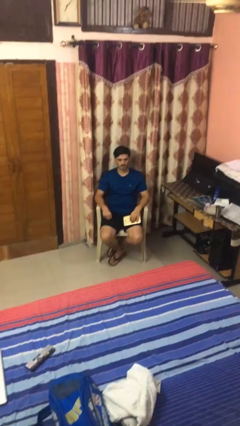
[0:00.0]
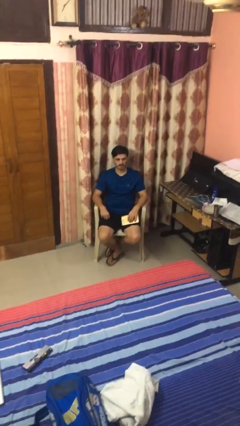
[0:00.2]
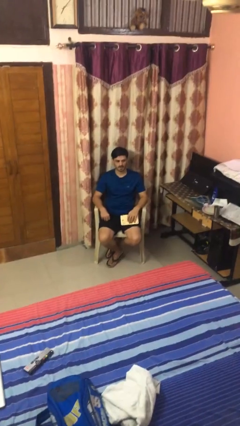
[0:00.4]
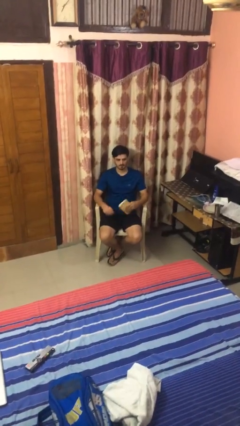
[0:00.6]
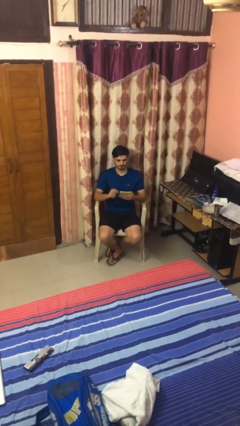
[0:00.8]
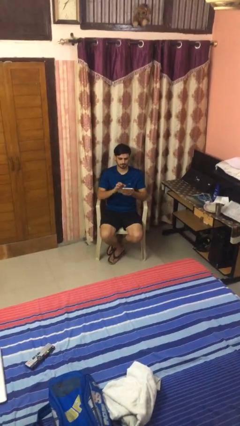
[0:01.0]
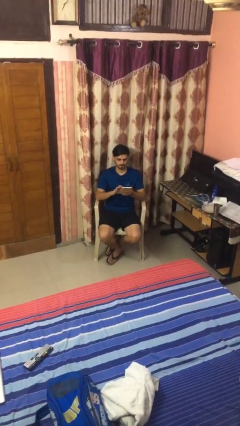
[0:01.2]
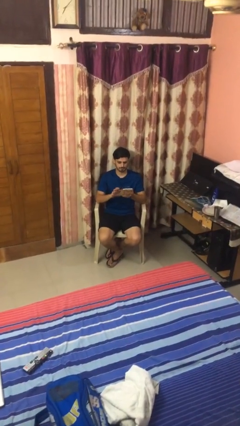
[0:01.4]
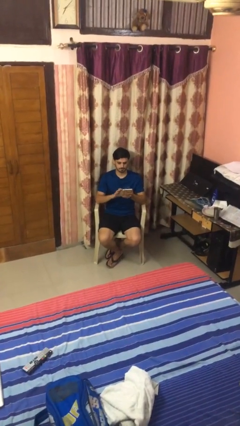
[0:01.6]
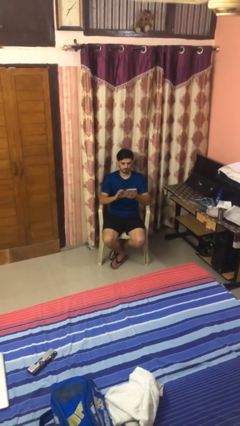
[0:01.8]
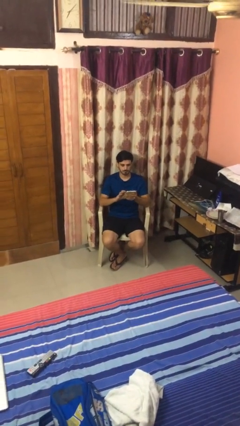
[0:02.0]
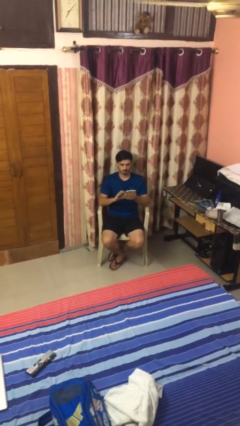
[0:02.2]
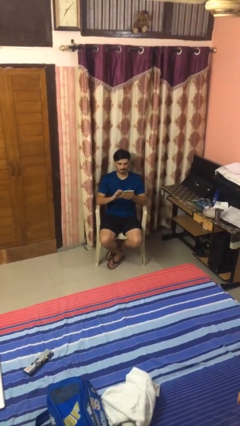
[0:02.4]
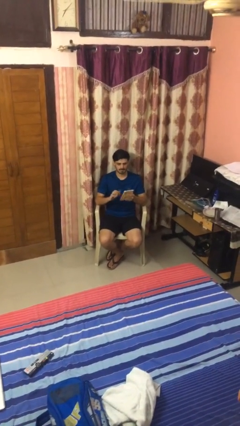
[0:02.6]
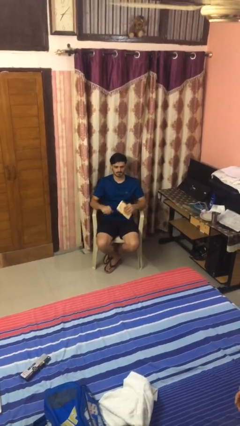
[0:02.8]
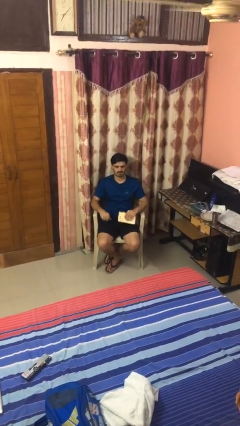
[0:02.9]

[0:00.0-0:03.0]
person interacts with tablet

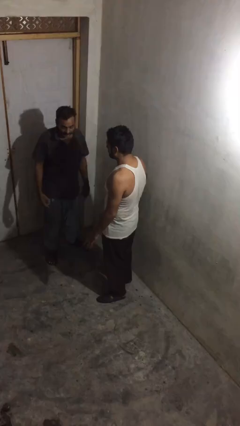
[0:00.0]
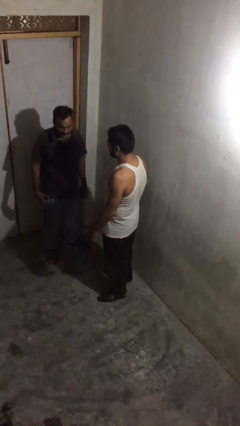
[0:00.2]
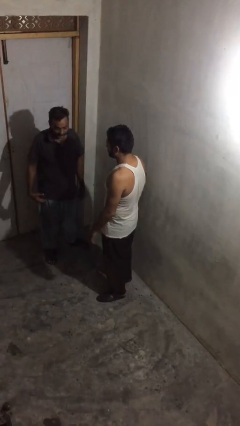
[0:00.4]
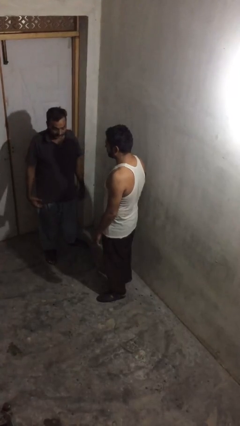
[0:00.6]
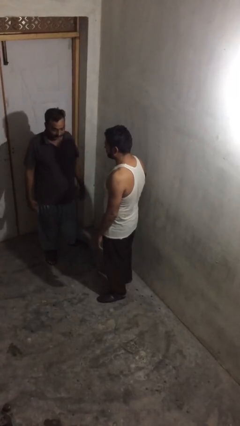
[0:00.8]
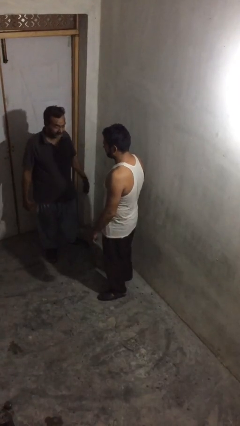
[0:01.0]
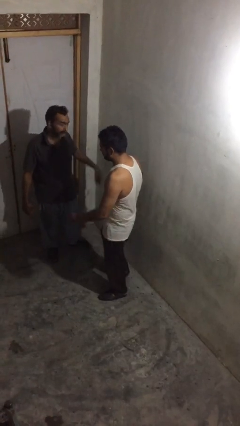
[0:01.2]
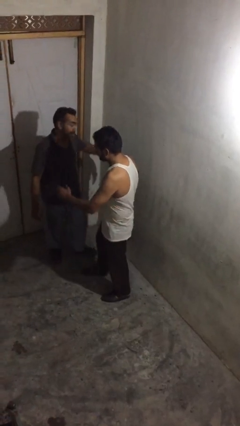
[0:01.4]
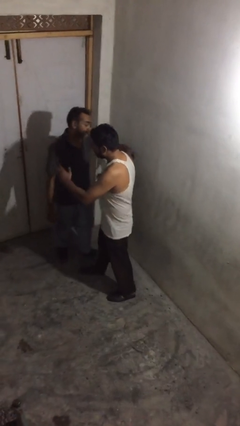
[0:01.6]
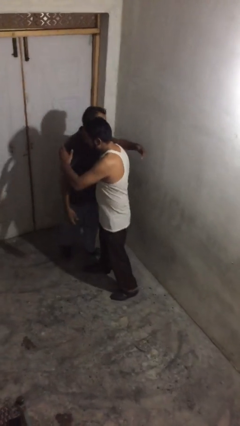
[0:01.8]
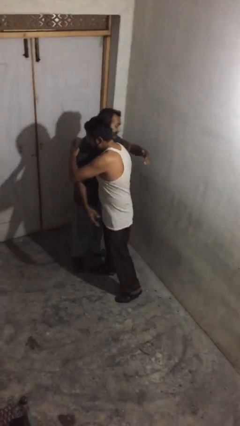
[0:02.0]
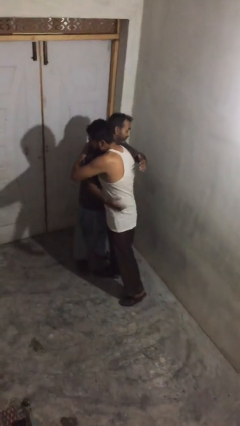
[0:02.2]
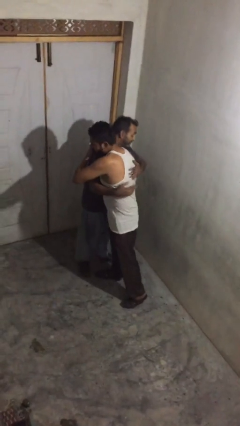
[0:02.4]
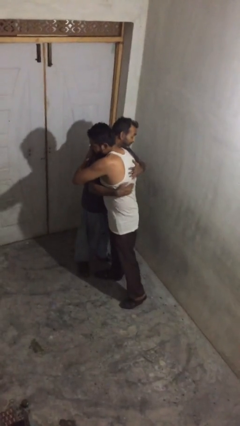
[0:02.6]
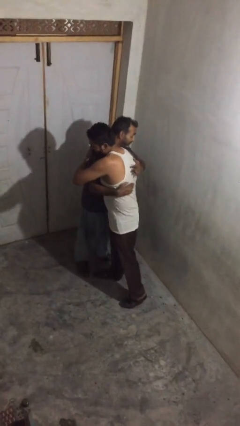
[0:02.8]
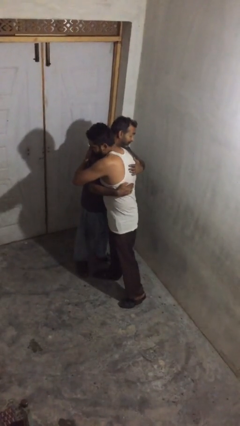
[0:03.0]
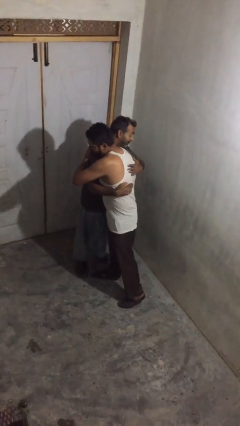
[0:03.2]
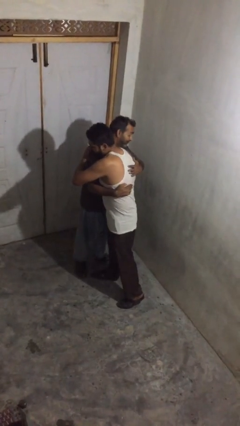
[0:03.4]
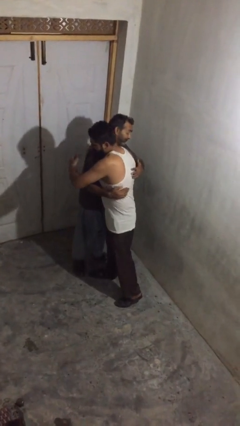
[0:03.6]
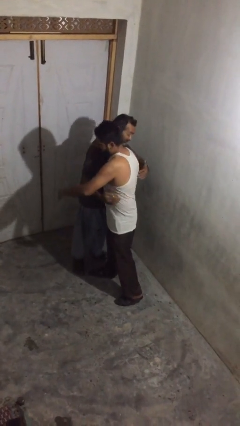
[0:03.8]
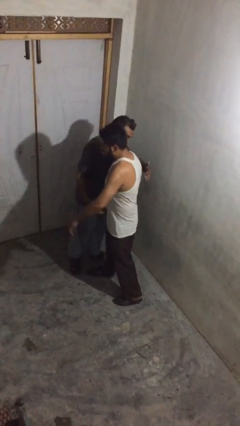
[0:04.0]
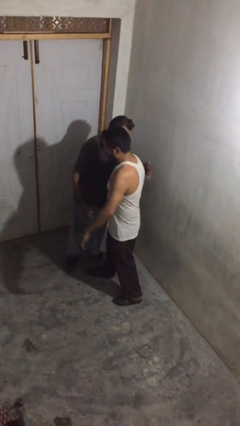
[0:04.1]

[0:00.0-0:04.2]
person embraces person

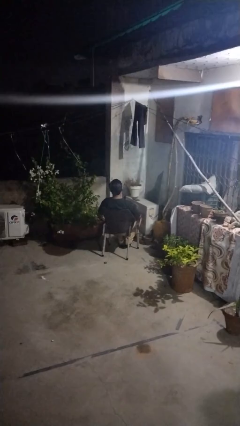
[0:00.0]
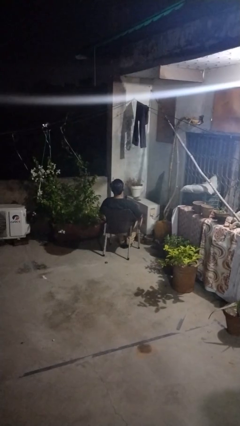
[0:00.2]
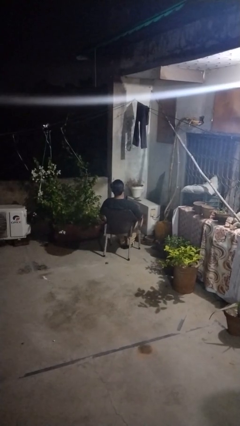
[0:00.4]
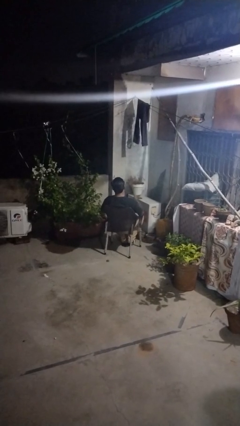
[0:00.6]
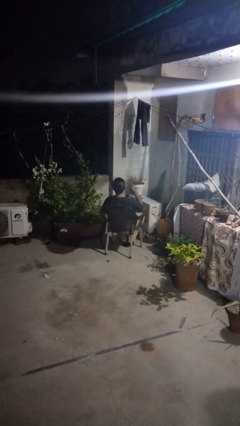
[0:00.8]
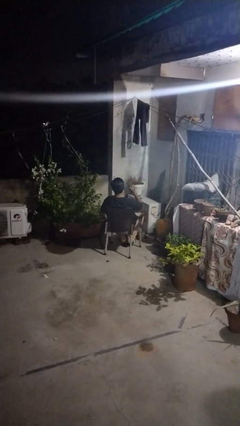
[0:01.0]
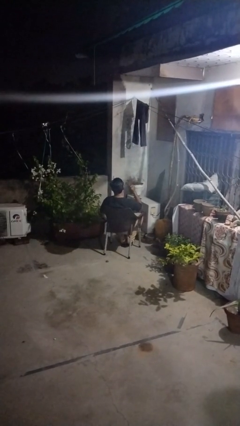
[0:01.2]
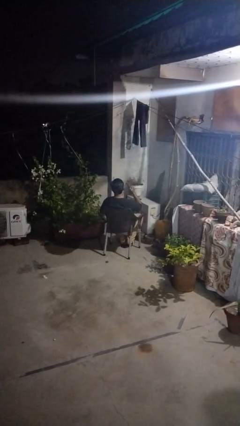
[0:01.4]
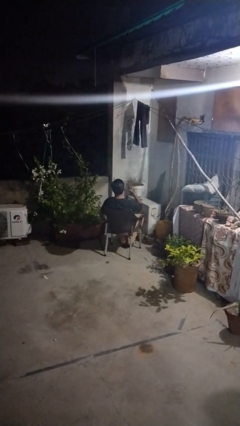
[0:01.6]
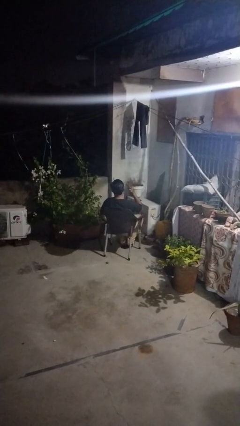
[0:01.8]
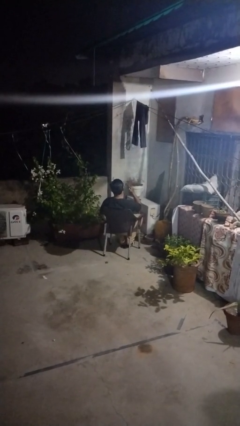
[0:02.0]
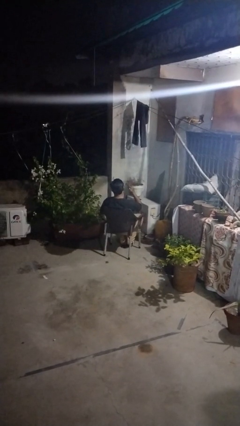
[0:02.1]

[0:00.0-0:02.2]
person gestures behind me

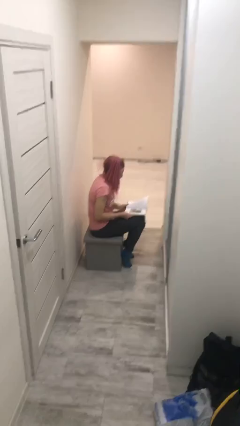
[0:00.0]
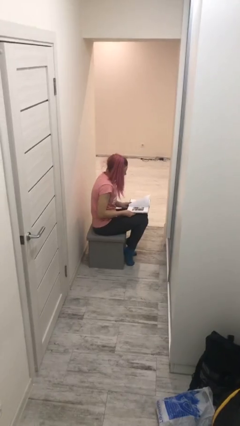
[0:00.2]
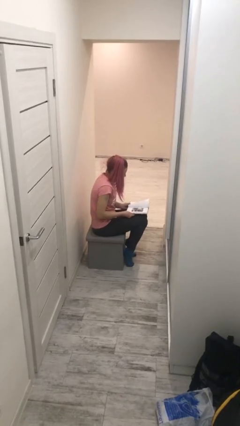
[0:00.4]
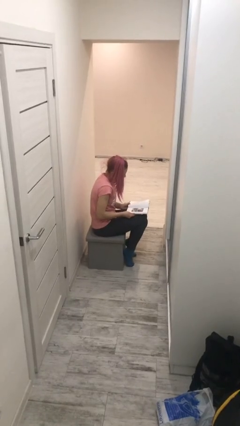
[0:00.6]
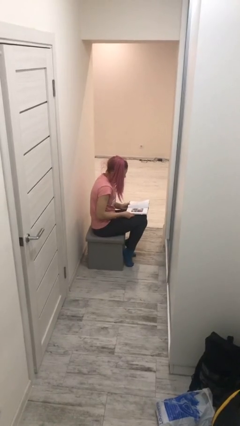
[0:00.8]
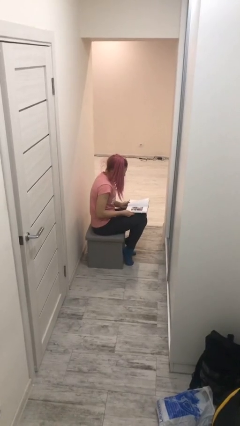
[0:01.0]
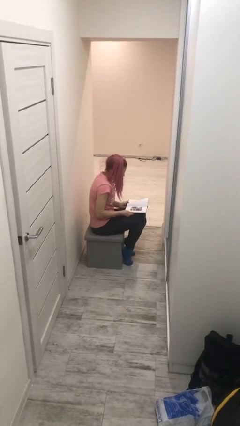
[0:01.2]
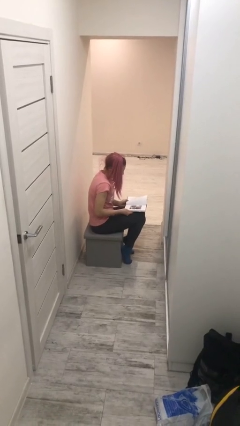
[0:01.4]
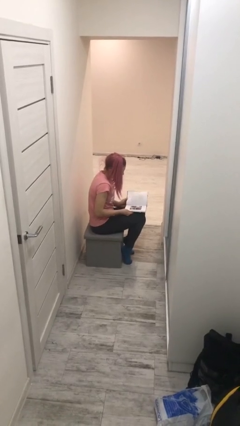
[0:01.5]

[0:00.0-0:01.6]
person reads document

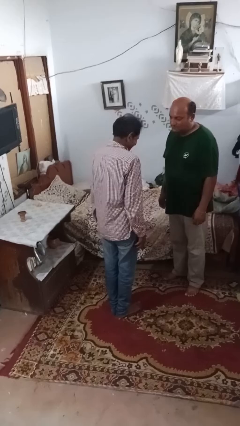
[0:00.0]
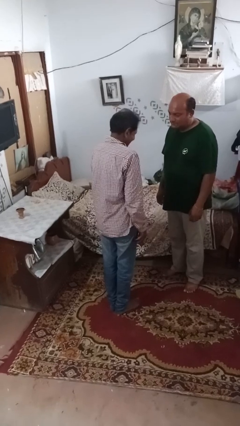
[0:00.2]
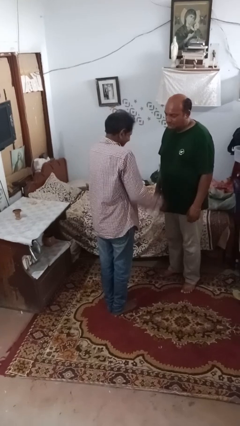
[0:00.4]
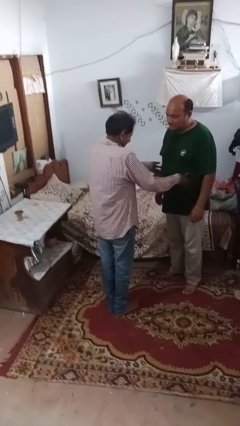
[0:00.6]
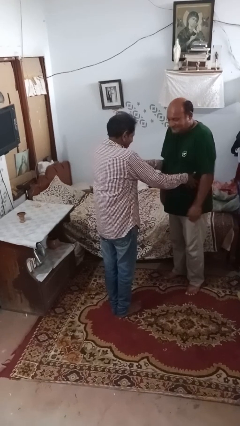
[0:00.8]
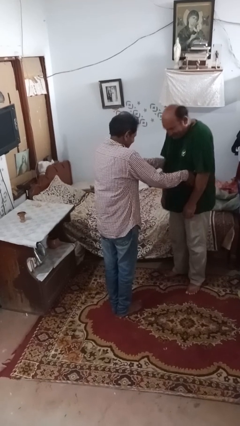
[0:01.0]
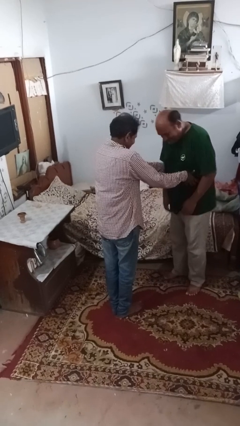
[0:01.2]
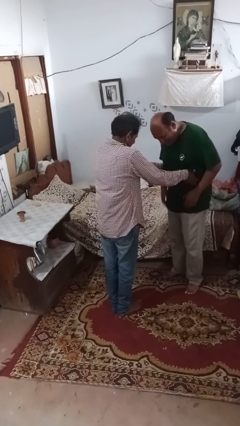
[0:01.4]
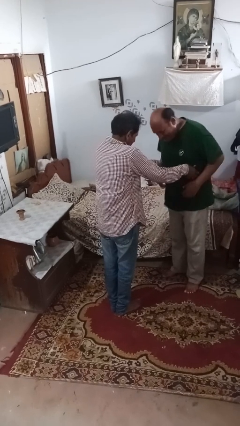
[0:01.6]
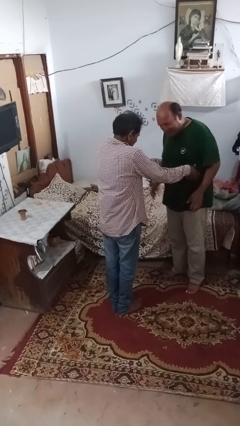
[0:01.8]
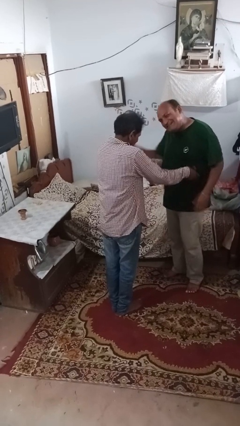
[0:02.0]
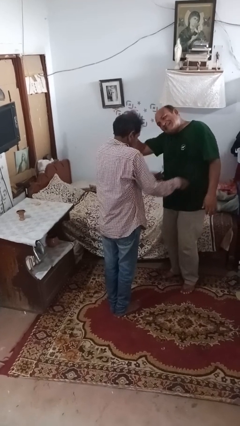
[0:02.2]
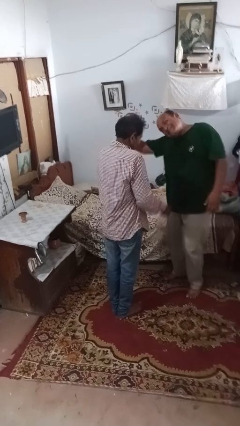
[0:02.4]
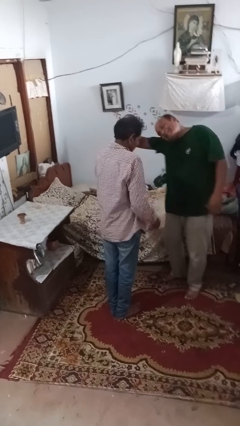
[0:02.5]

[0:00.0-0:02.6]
person tickles person

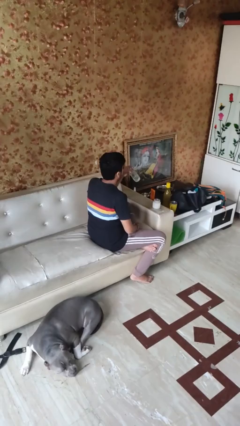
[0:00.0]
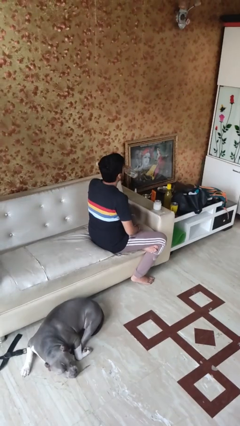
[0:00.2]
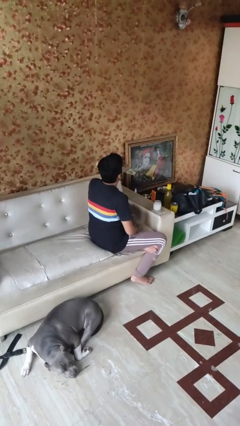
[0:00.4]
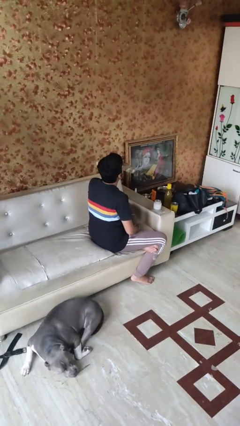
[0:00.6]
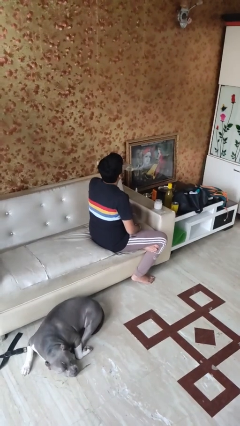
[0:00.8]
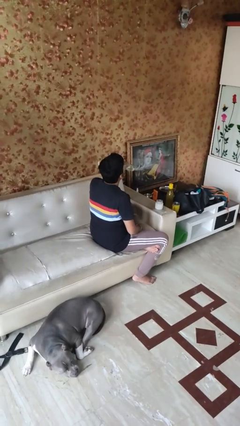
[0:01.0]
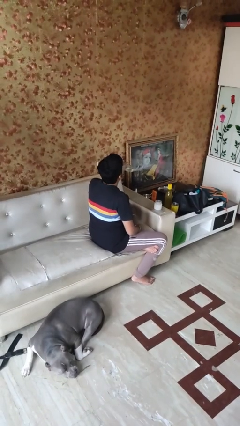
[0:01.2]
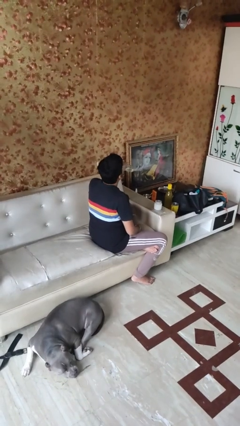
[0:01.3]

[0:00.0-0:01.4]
person drinks from cup

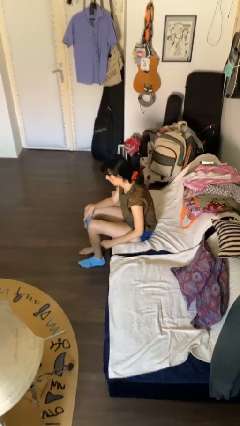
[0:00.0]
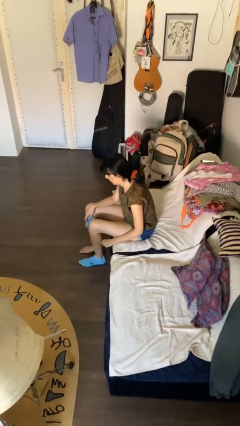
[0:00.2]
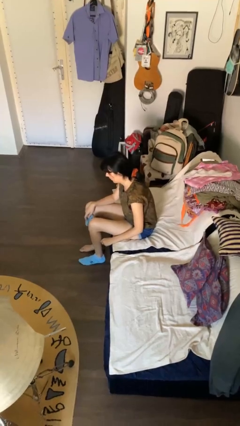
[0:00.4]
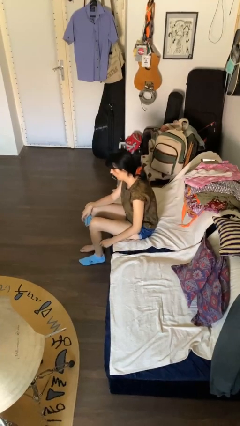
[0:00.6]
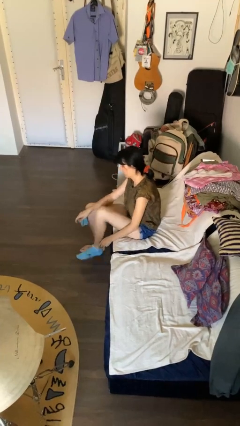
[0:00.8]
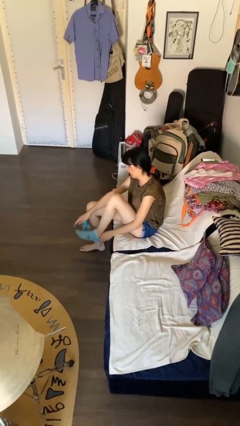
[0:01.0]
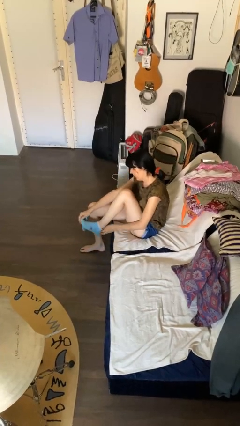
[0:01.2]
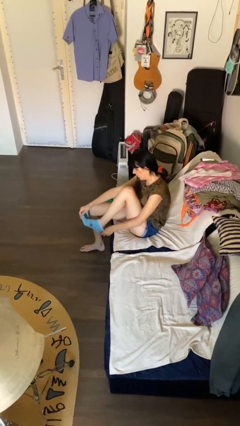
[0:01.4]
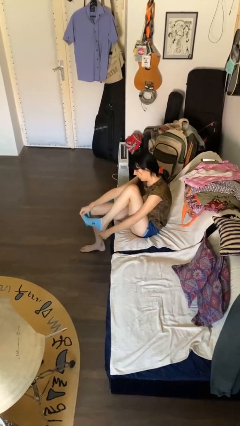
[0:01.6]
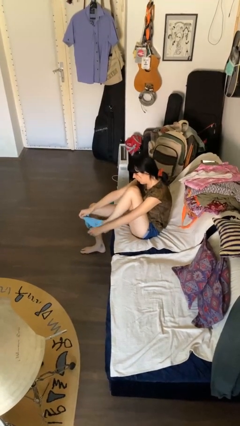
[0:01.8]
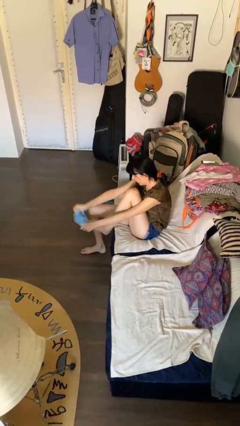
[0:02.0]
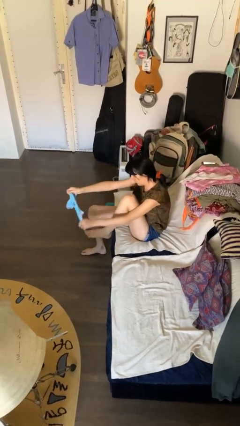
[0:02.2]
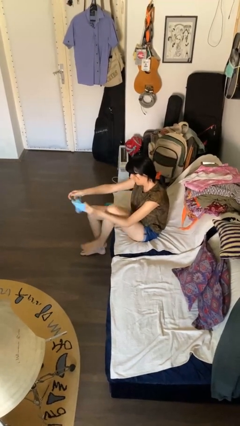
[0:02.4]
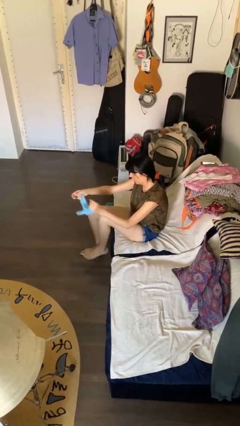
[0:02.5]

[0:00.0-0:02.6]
person takes off socks
